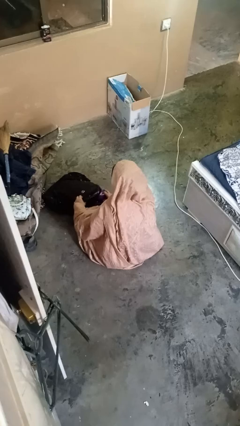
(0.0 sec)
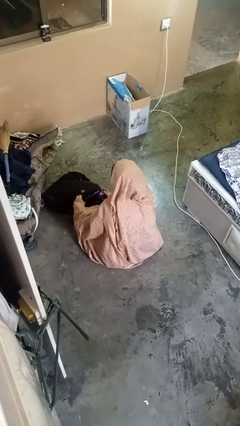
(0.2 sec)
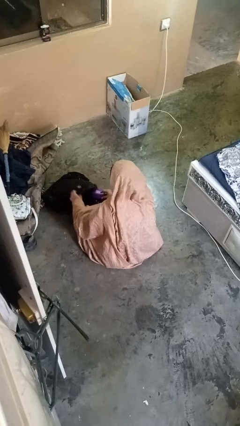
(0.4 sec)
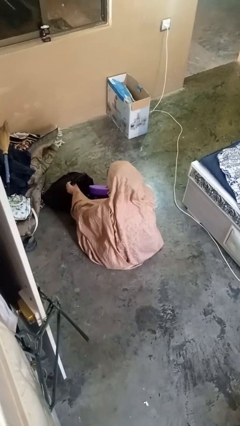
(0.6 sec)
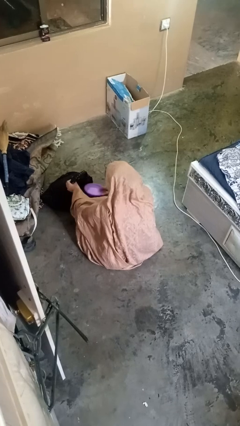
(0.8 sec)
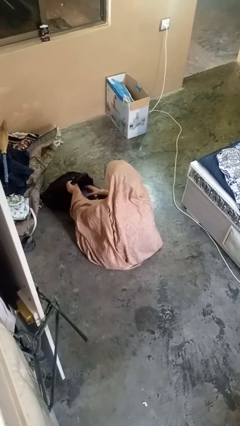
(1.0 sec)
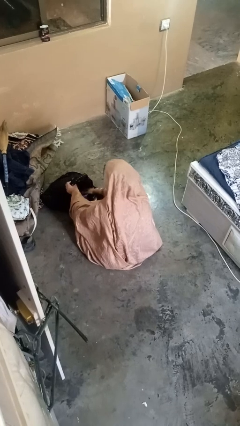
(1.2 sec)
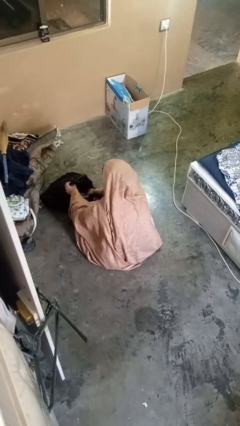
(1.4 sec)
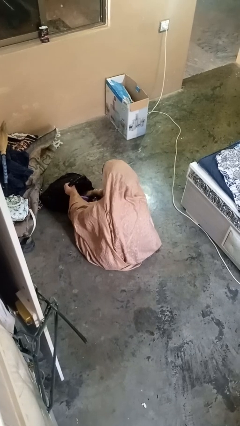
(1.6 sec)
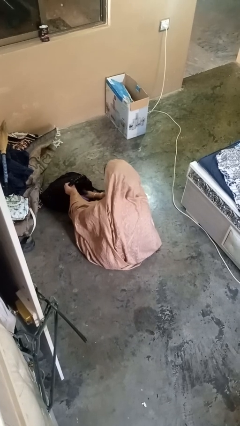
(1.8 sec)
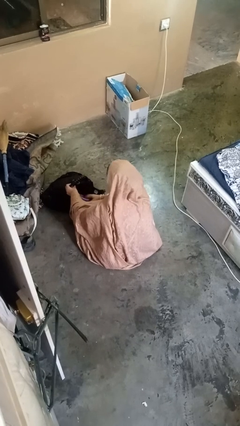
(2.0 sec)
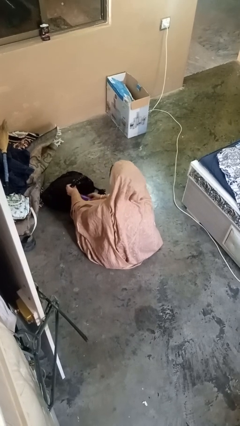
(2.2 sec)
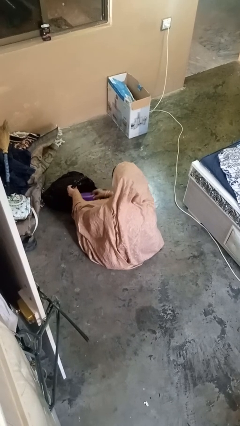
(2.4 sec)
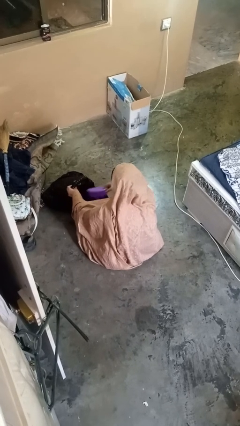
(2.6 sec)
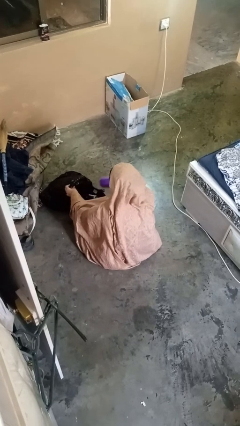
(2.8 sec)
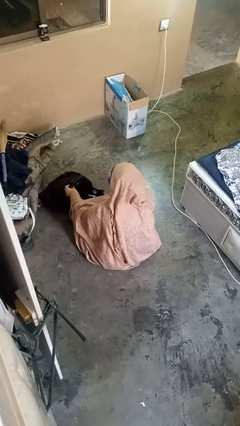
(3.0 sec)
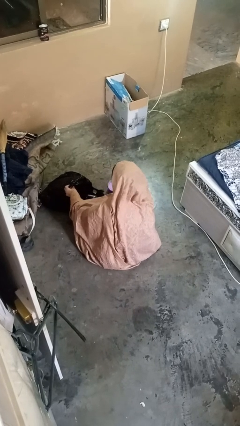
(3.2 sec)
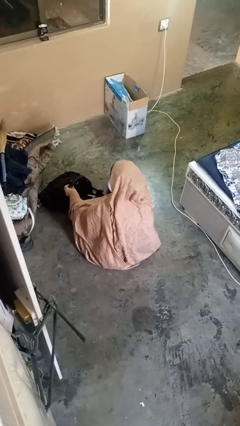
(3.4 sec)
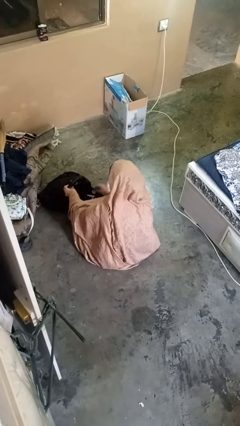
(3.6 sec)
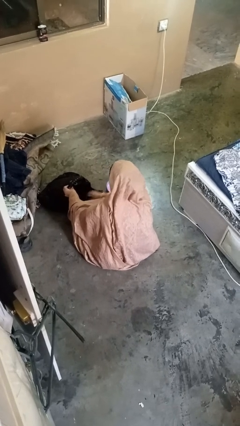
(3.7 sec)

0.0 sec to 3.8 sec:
person searches in backpack

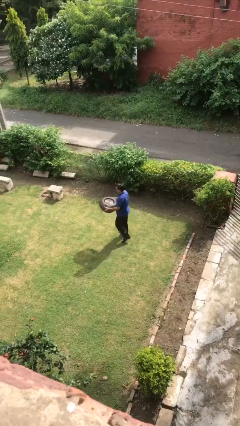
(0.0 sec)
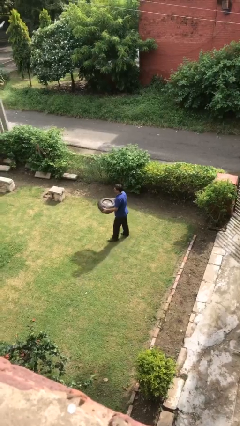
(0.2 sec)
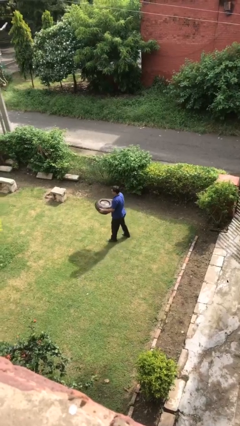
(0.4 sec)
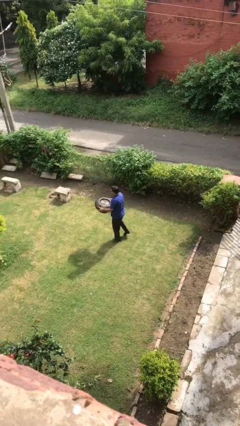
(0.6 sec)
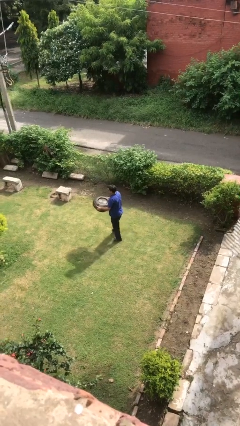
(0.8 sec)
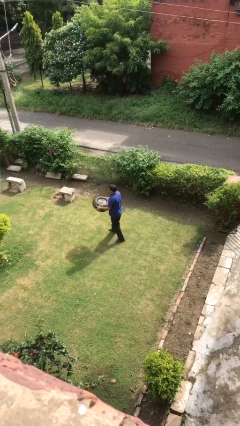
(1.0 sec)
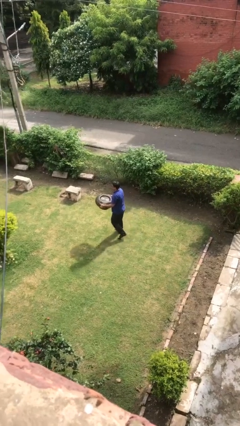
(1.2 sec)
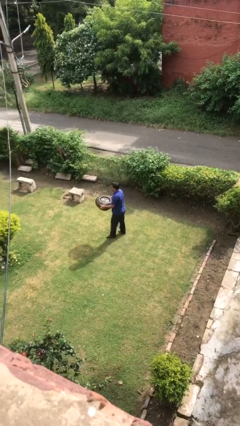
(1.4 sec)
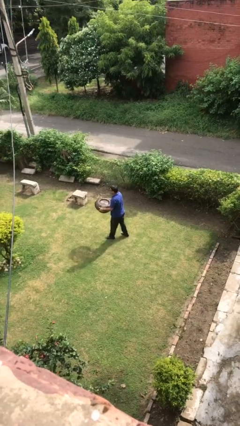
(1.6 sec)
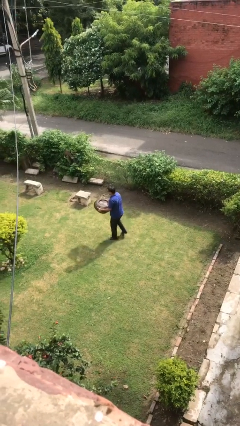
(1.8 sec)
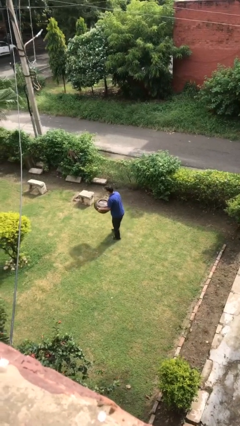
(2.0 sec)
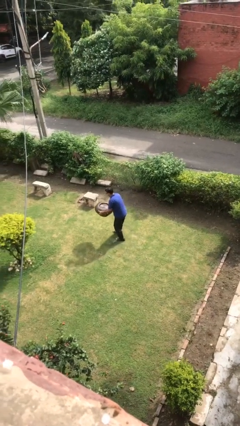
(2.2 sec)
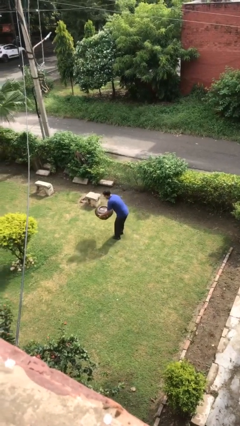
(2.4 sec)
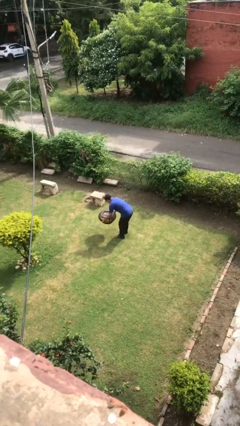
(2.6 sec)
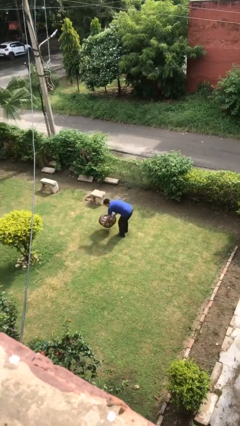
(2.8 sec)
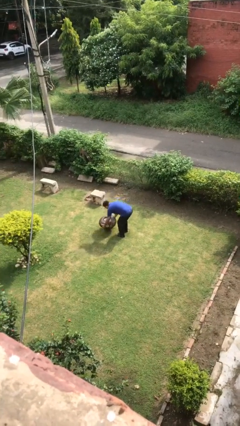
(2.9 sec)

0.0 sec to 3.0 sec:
person carries heavy object

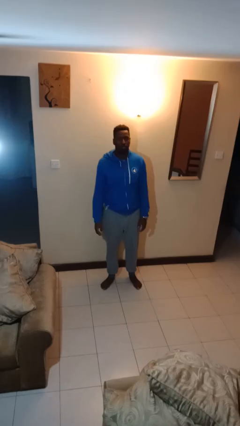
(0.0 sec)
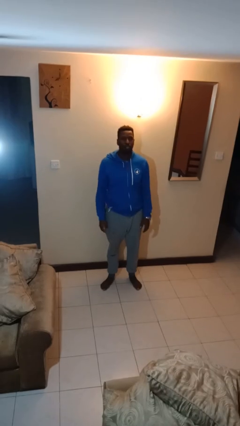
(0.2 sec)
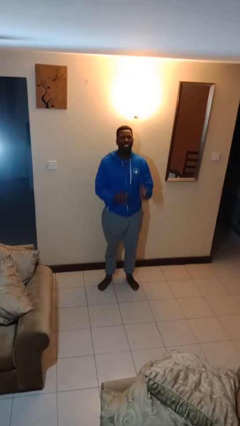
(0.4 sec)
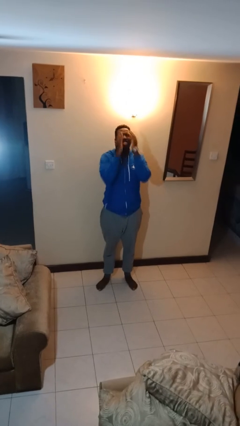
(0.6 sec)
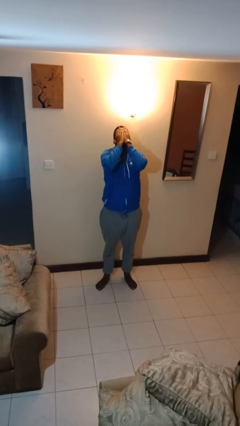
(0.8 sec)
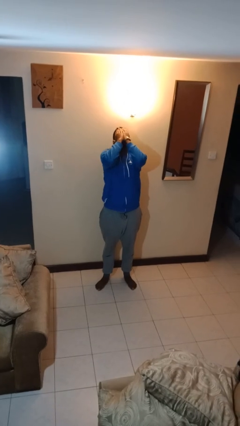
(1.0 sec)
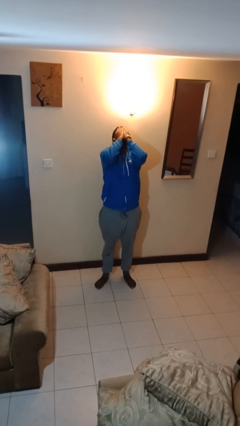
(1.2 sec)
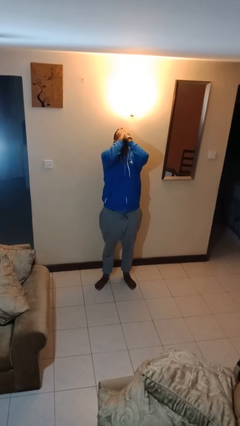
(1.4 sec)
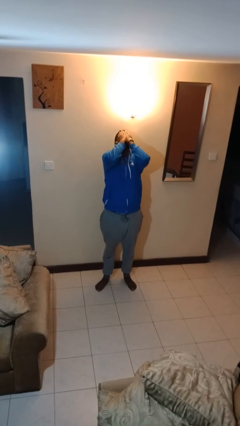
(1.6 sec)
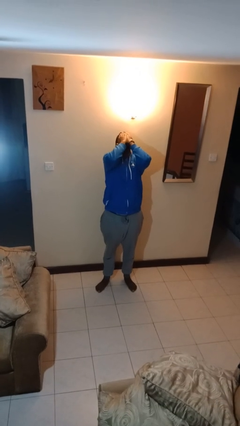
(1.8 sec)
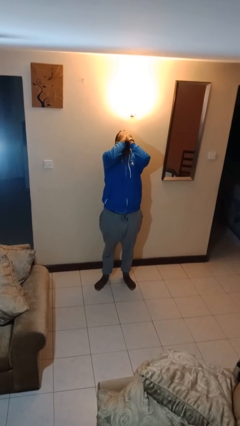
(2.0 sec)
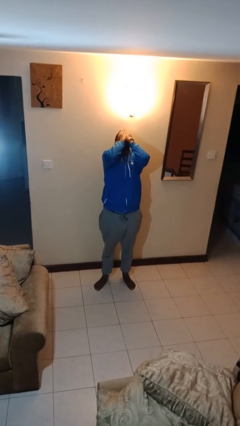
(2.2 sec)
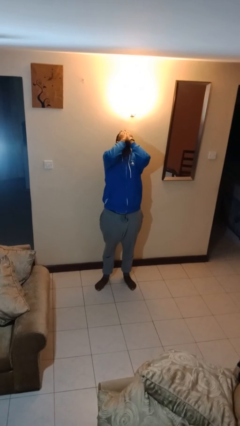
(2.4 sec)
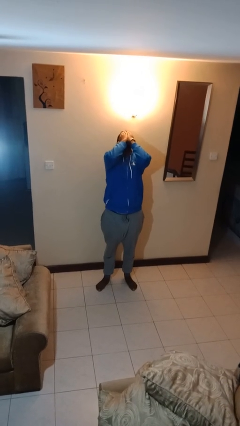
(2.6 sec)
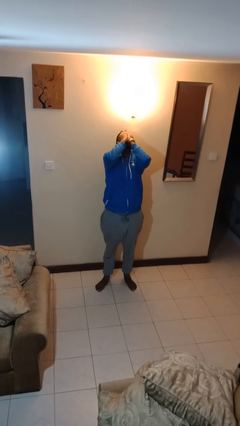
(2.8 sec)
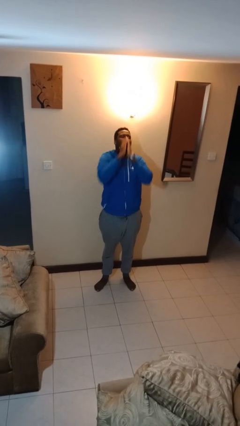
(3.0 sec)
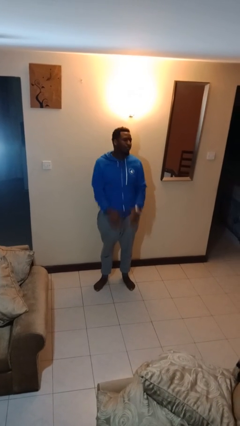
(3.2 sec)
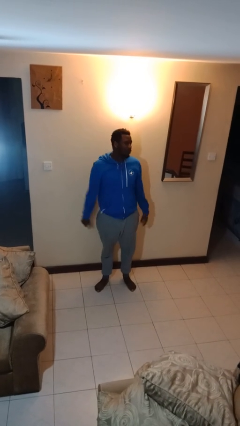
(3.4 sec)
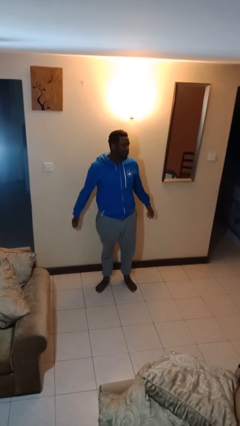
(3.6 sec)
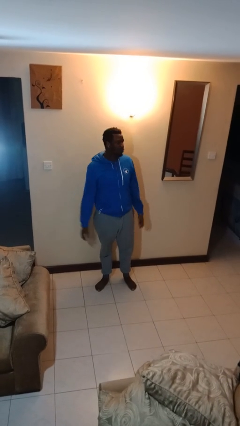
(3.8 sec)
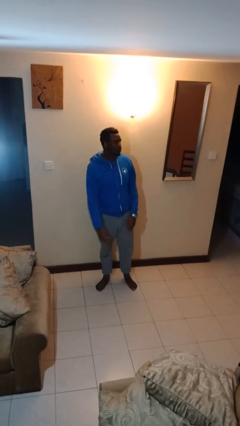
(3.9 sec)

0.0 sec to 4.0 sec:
person covers face with hands

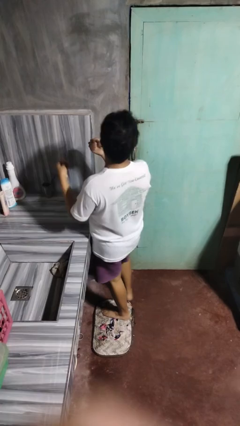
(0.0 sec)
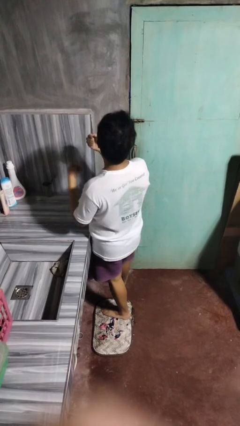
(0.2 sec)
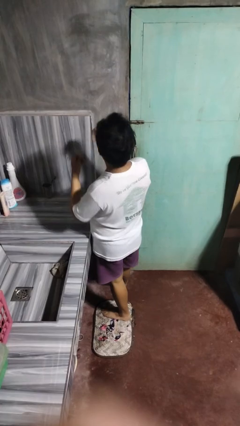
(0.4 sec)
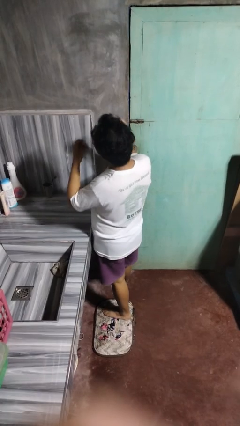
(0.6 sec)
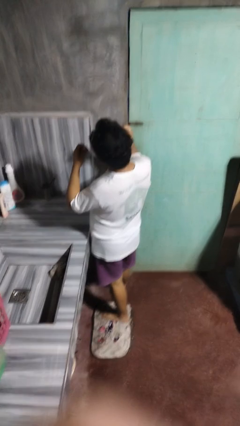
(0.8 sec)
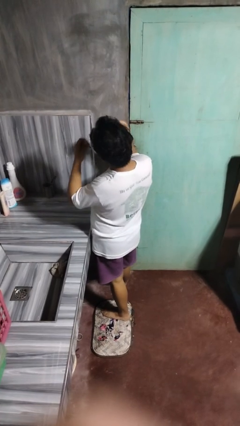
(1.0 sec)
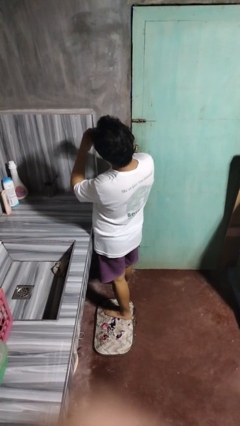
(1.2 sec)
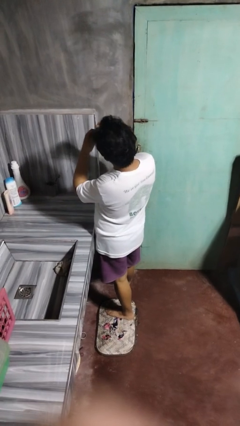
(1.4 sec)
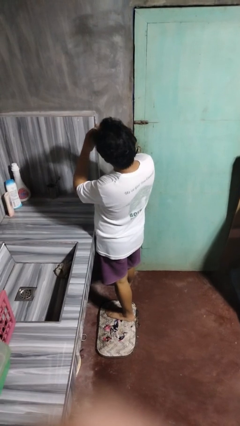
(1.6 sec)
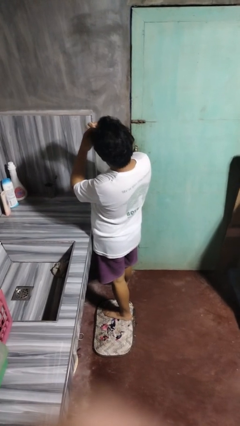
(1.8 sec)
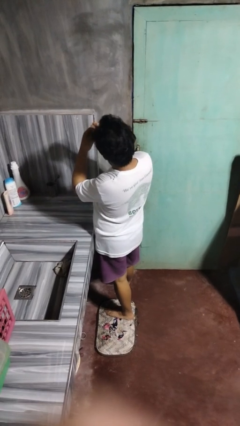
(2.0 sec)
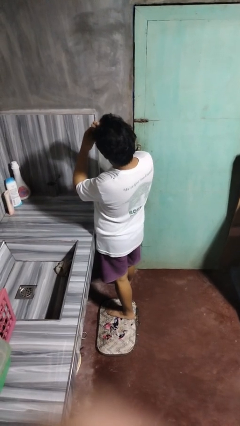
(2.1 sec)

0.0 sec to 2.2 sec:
person flosses

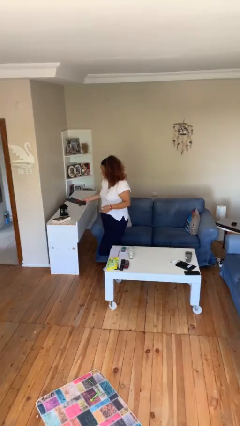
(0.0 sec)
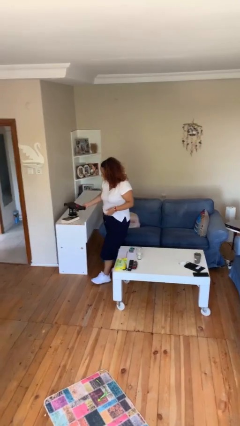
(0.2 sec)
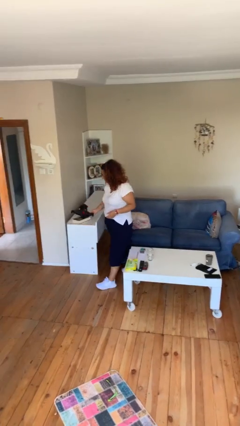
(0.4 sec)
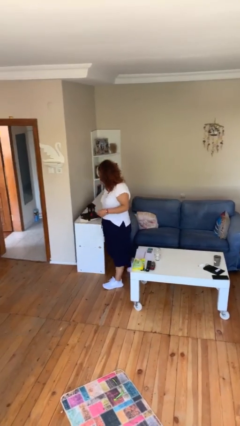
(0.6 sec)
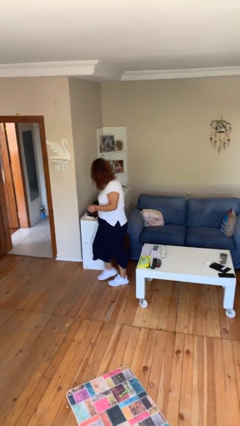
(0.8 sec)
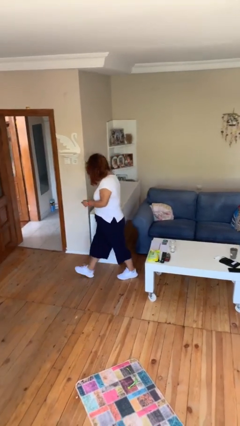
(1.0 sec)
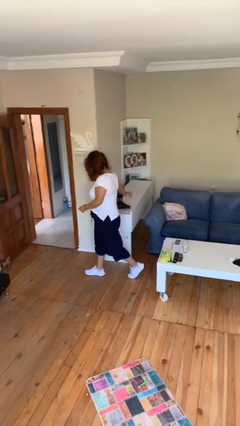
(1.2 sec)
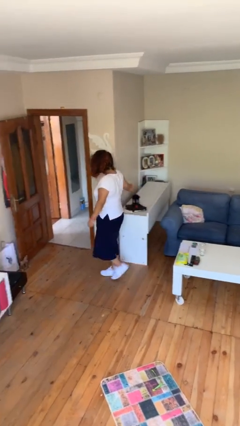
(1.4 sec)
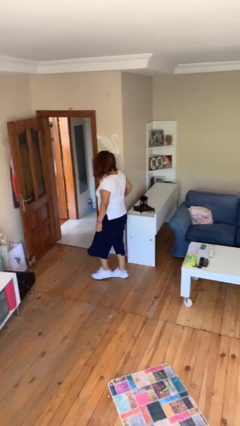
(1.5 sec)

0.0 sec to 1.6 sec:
person puts down object on table

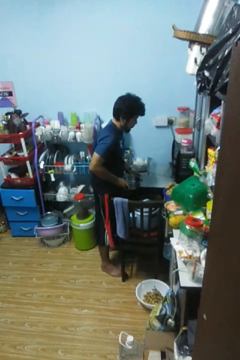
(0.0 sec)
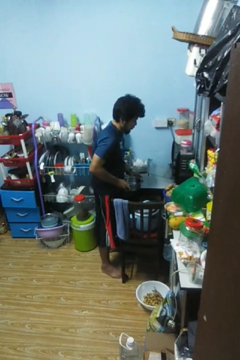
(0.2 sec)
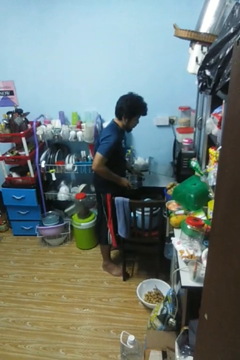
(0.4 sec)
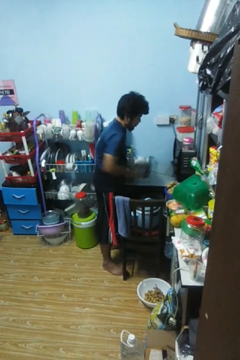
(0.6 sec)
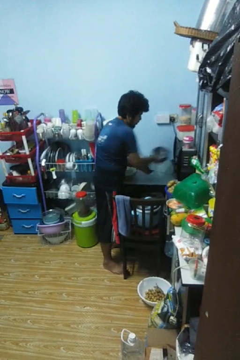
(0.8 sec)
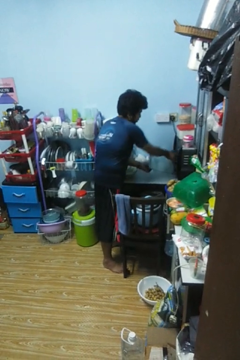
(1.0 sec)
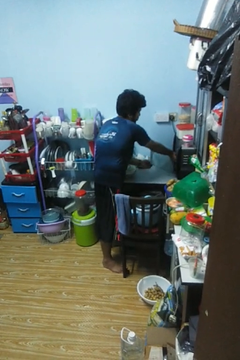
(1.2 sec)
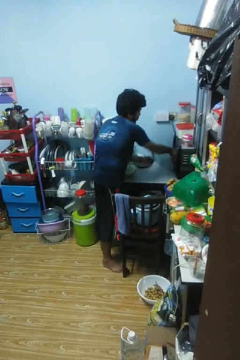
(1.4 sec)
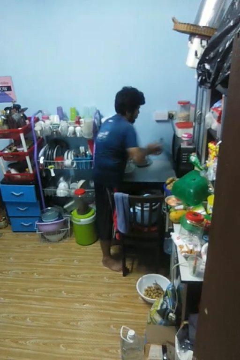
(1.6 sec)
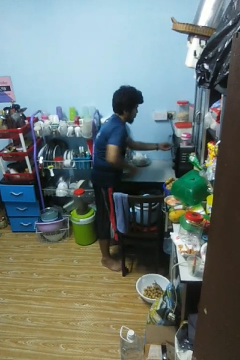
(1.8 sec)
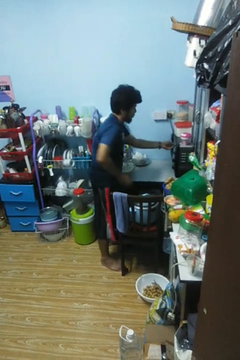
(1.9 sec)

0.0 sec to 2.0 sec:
person puts object into oven

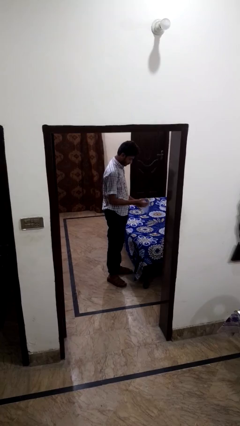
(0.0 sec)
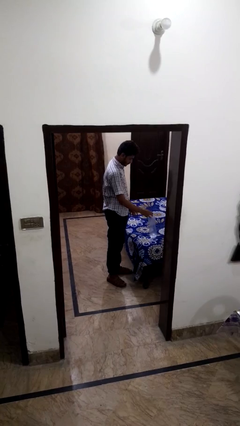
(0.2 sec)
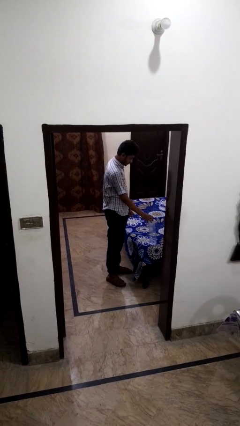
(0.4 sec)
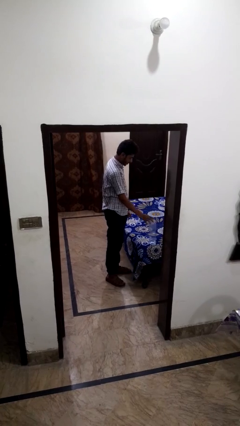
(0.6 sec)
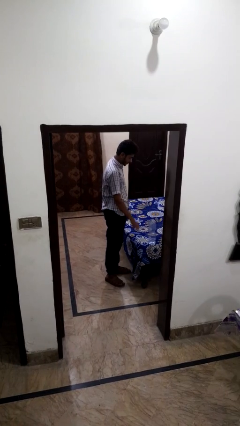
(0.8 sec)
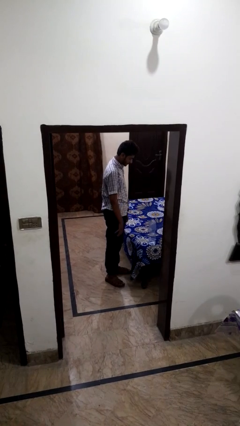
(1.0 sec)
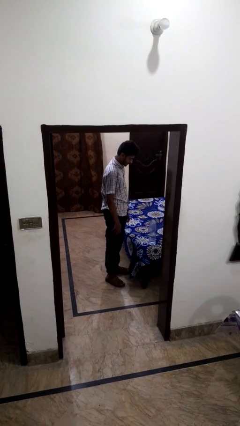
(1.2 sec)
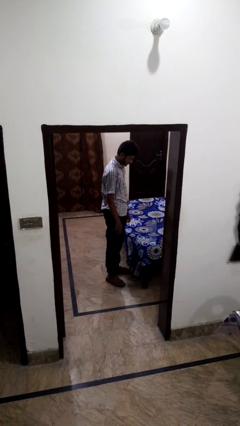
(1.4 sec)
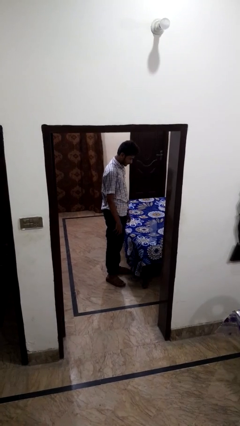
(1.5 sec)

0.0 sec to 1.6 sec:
person puts down object on bed
